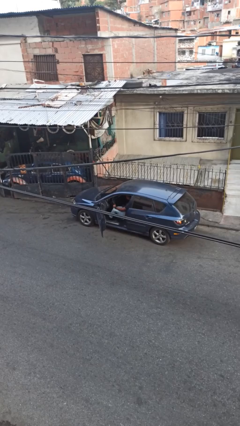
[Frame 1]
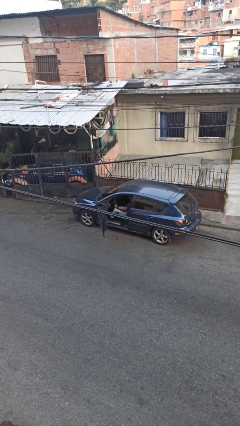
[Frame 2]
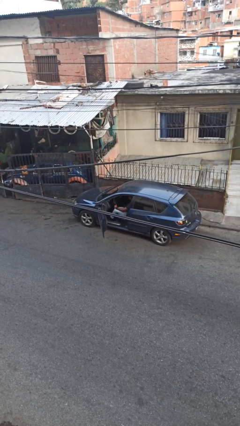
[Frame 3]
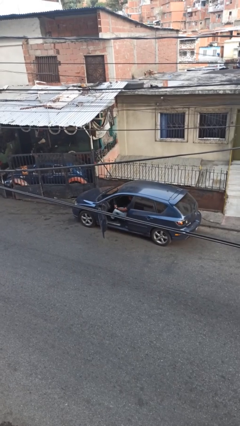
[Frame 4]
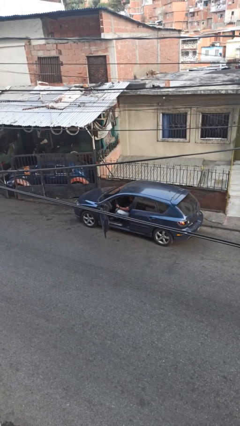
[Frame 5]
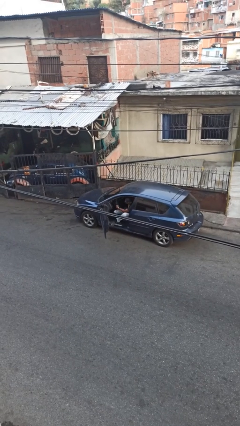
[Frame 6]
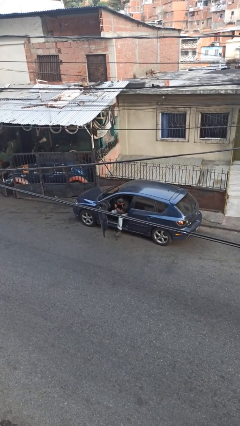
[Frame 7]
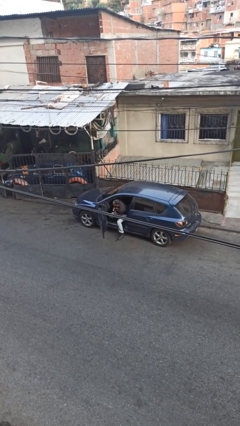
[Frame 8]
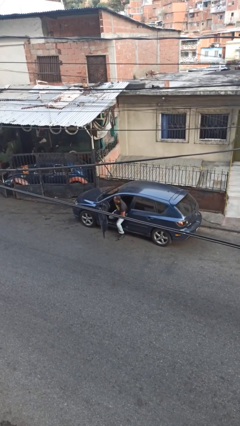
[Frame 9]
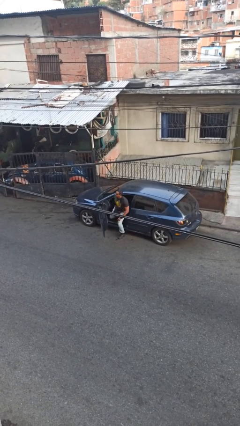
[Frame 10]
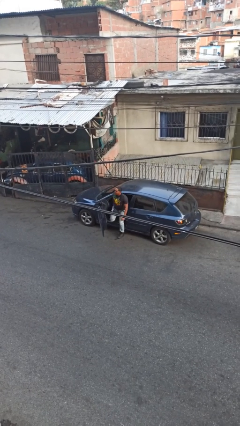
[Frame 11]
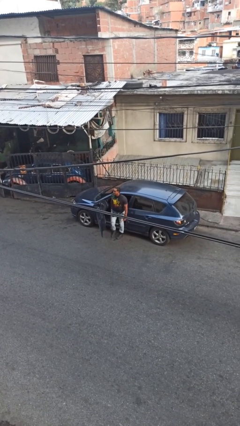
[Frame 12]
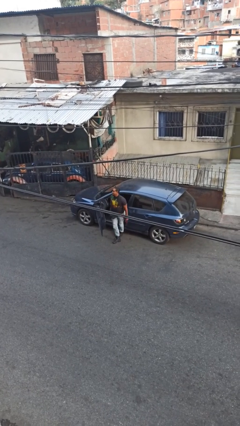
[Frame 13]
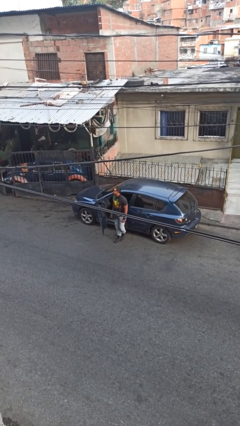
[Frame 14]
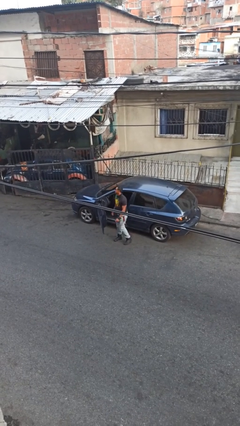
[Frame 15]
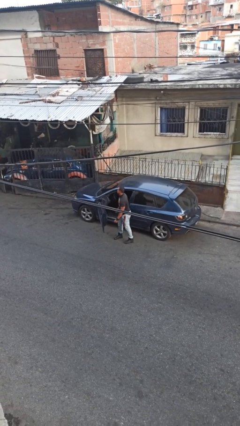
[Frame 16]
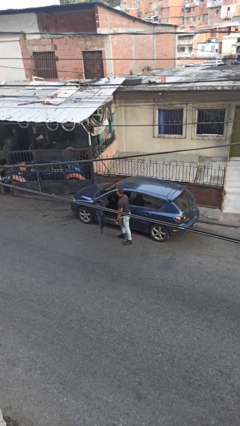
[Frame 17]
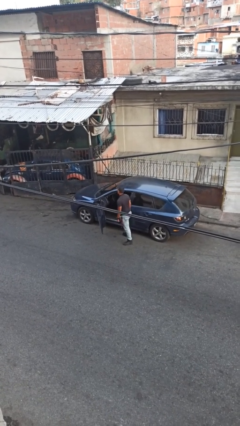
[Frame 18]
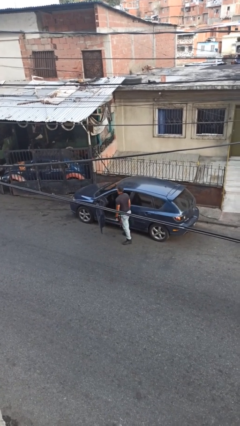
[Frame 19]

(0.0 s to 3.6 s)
person exits car

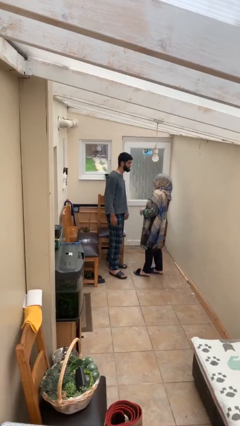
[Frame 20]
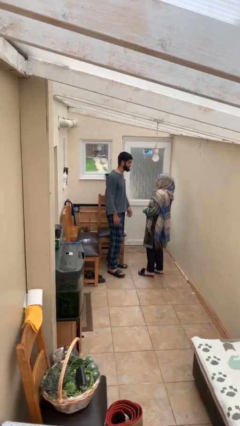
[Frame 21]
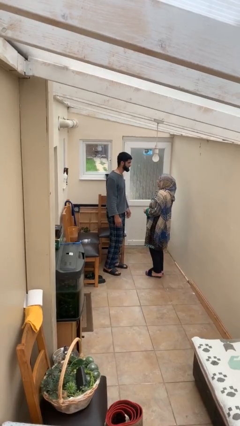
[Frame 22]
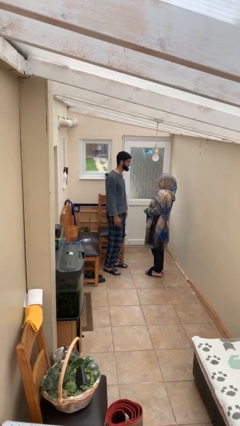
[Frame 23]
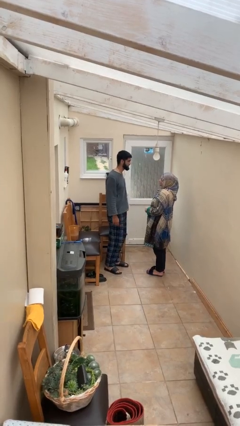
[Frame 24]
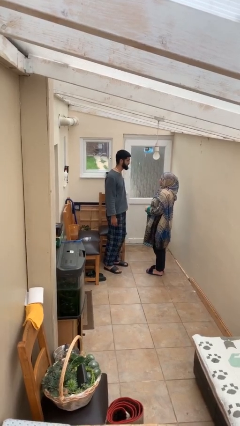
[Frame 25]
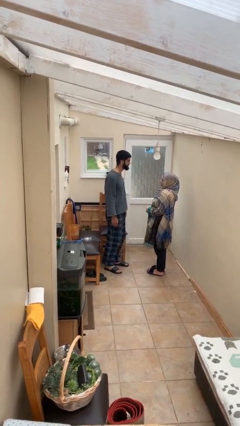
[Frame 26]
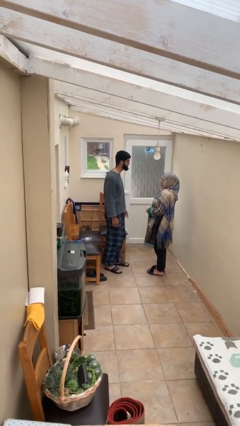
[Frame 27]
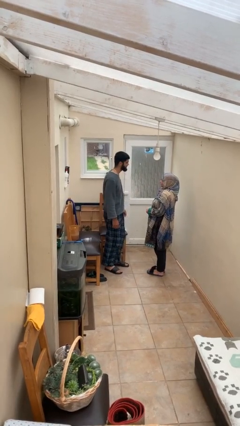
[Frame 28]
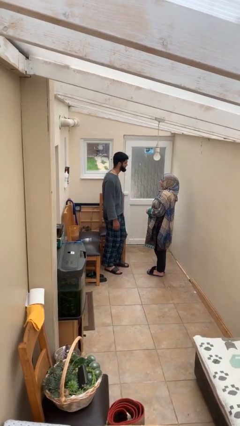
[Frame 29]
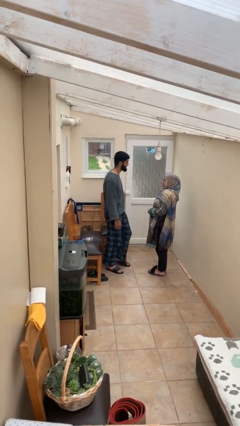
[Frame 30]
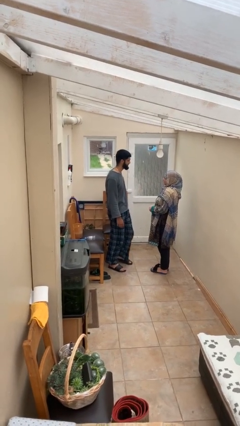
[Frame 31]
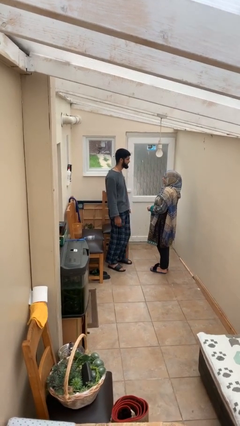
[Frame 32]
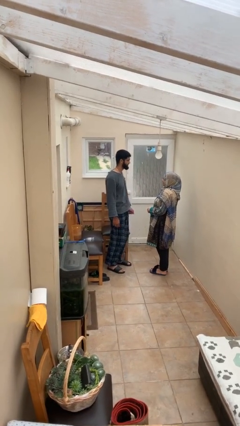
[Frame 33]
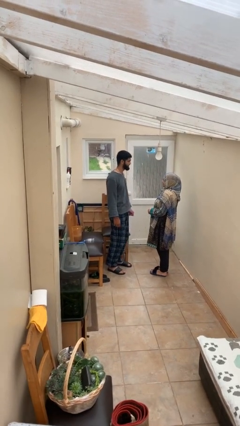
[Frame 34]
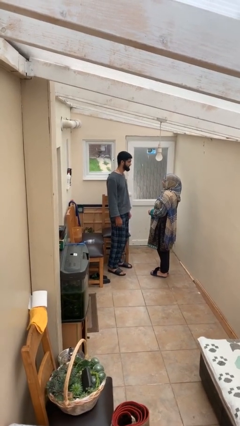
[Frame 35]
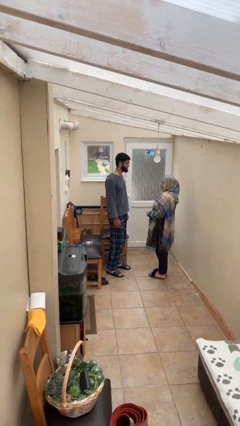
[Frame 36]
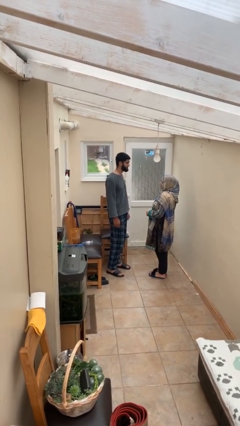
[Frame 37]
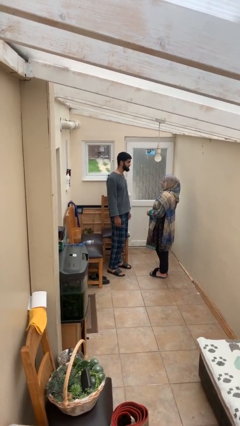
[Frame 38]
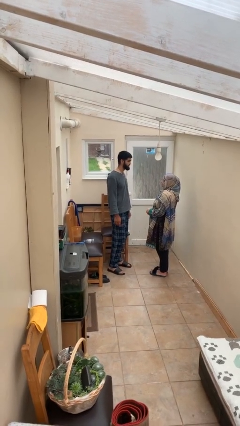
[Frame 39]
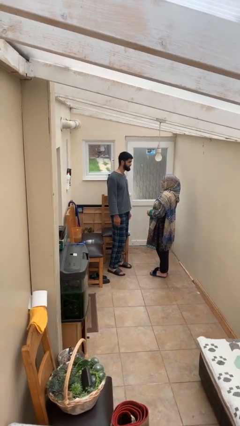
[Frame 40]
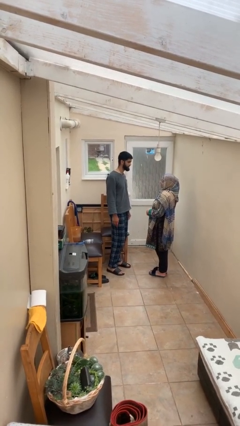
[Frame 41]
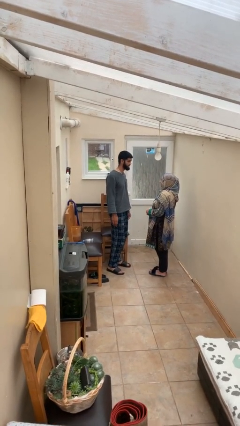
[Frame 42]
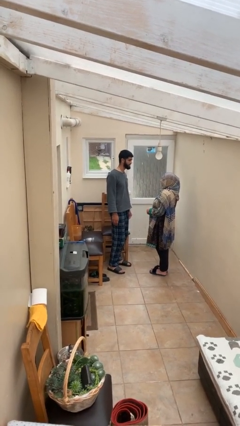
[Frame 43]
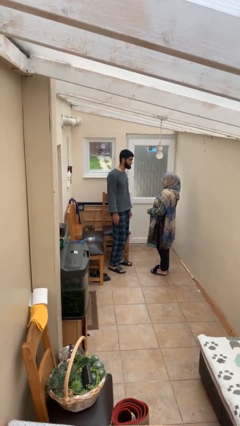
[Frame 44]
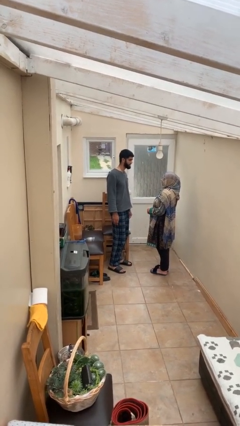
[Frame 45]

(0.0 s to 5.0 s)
person talks to person

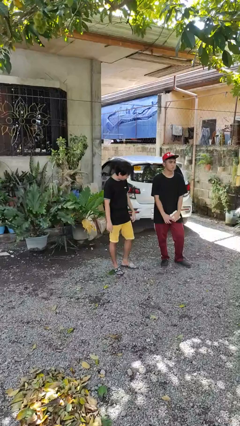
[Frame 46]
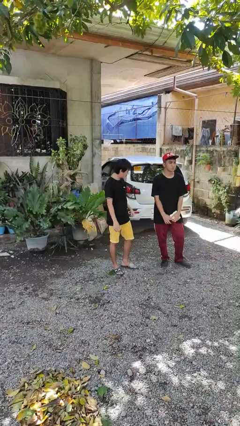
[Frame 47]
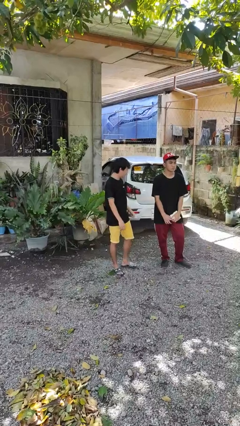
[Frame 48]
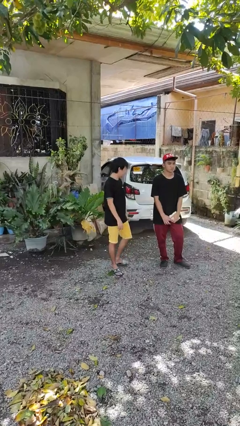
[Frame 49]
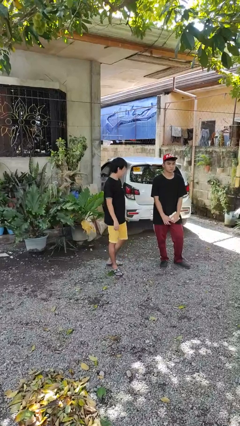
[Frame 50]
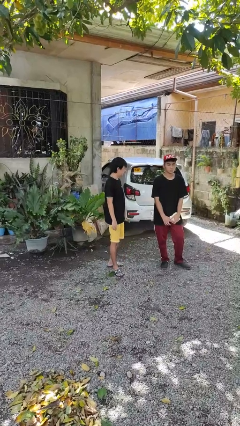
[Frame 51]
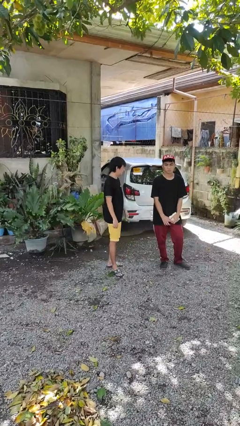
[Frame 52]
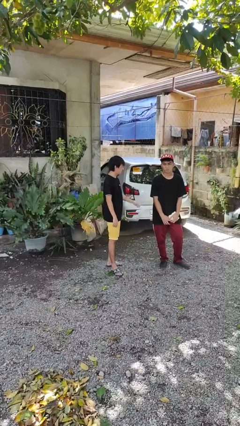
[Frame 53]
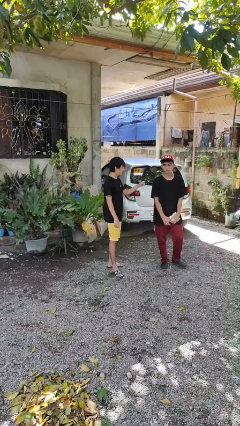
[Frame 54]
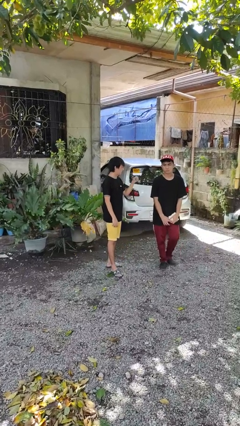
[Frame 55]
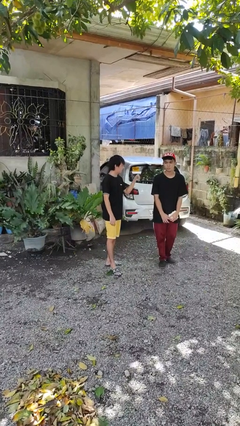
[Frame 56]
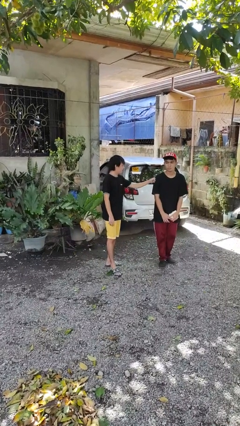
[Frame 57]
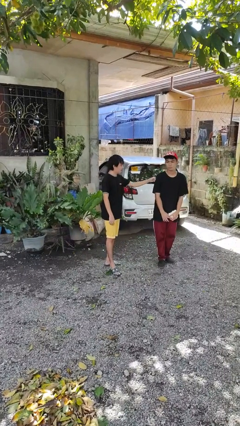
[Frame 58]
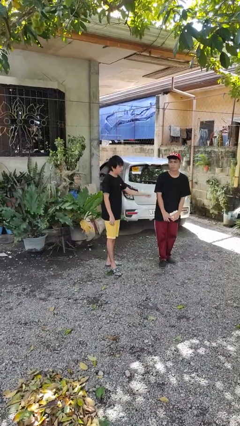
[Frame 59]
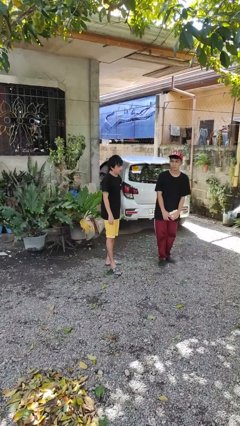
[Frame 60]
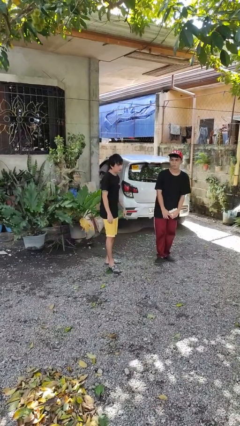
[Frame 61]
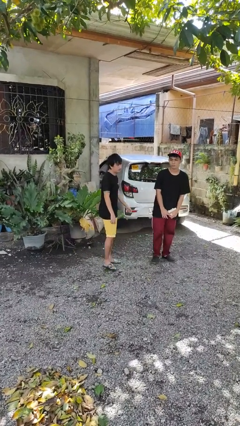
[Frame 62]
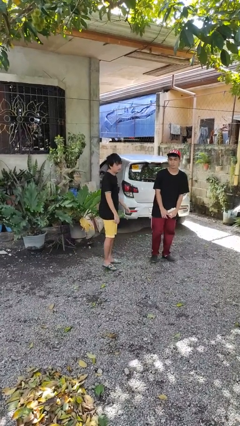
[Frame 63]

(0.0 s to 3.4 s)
person pounds shoulders of person

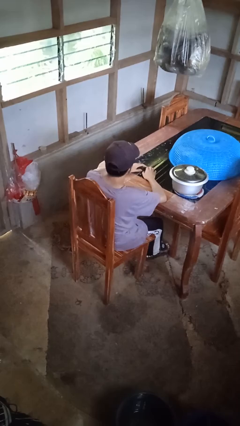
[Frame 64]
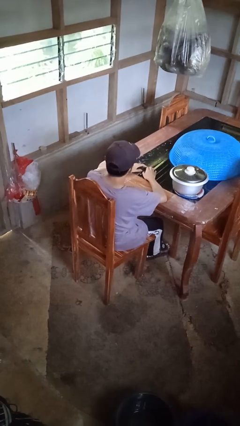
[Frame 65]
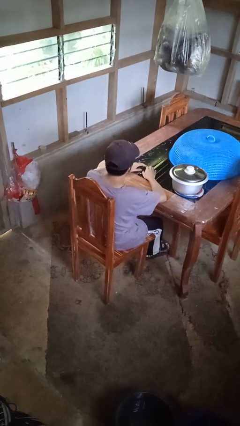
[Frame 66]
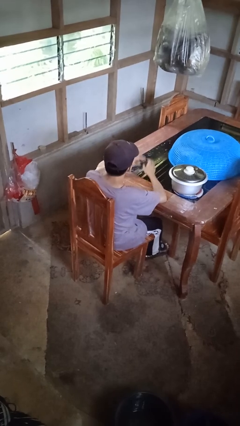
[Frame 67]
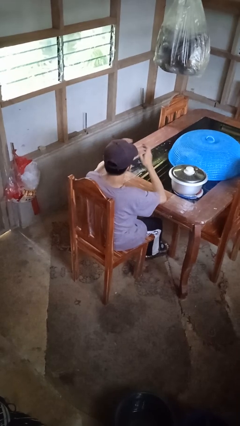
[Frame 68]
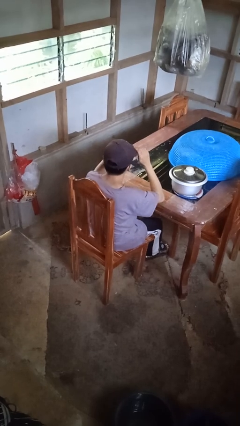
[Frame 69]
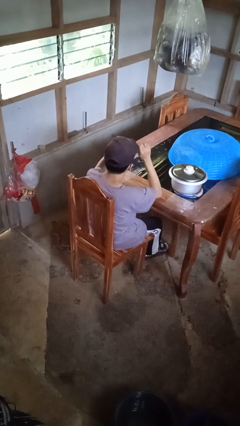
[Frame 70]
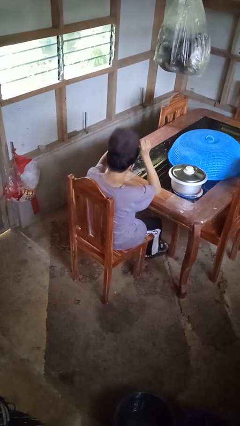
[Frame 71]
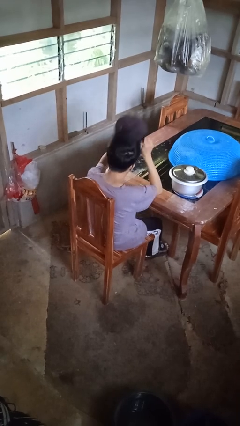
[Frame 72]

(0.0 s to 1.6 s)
person takes off hat

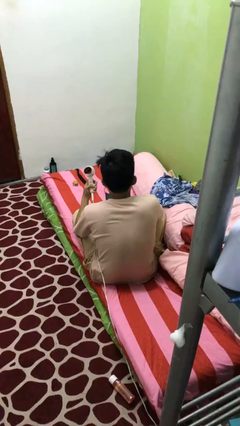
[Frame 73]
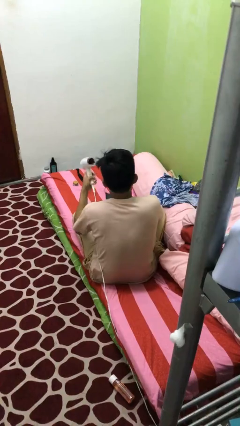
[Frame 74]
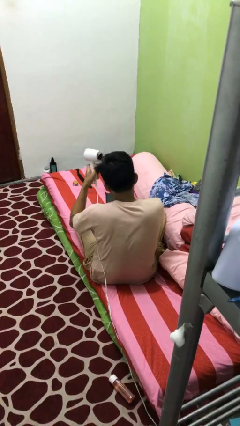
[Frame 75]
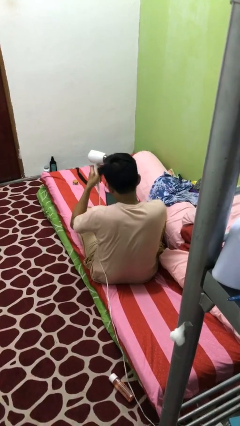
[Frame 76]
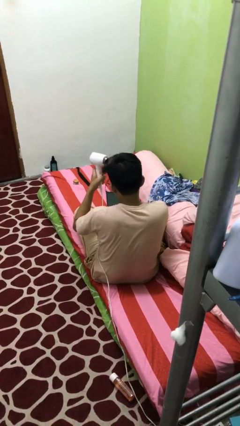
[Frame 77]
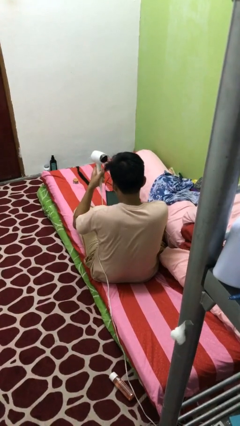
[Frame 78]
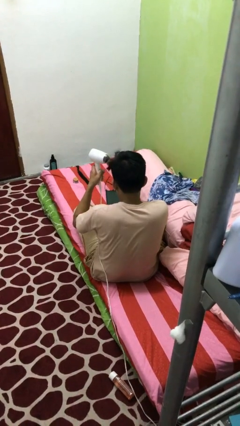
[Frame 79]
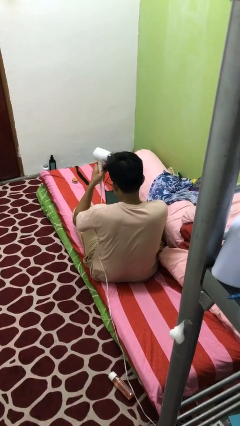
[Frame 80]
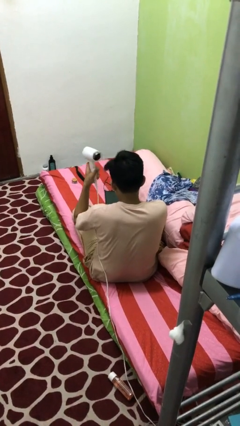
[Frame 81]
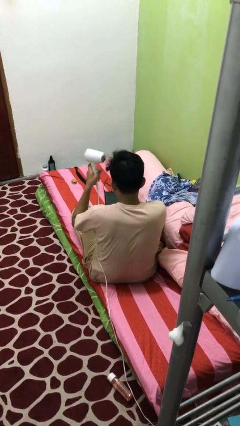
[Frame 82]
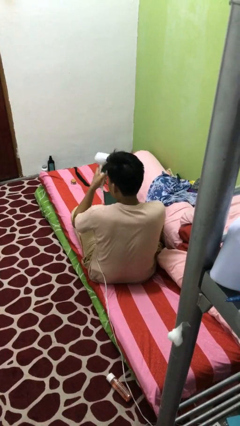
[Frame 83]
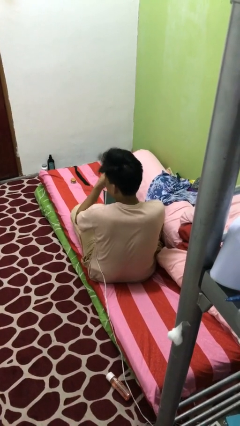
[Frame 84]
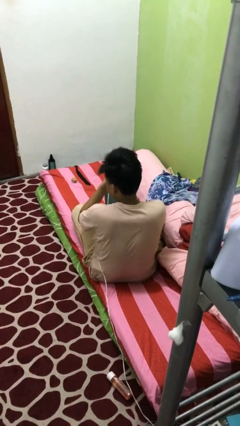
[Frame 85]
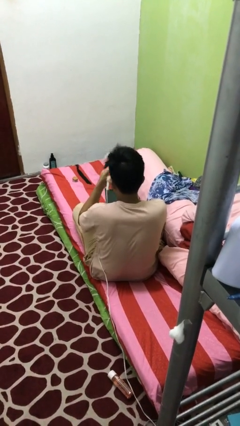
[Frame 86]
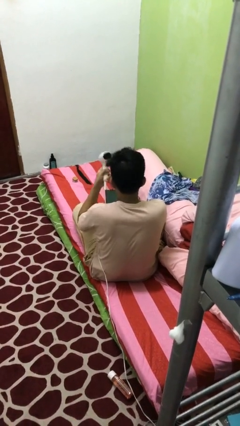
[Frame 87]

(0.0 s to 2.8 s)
person dries hair with hairdryer

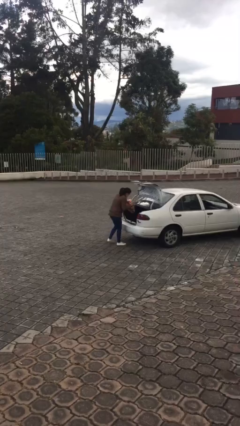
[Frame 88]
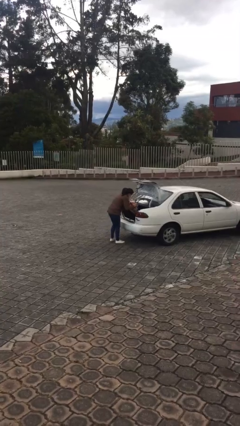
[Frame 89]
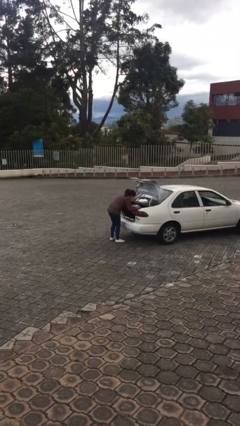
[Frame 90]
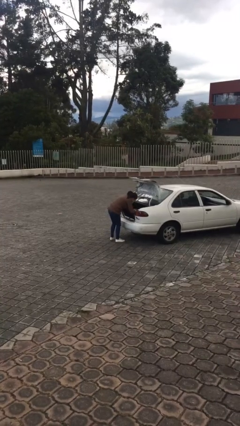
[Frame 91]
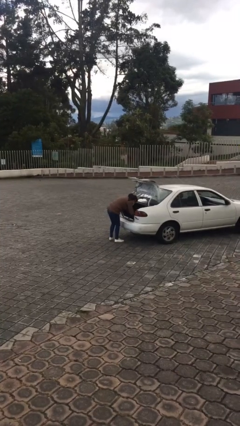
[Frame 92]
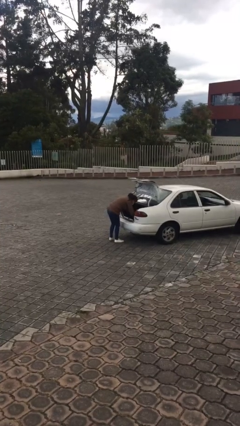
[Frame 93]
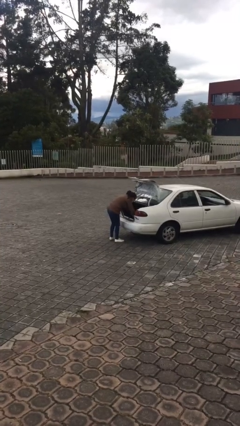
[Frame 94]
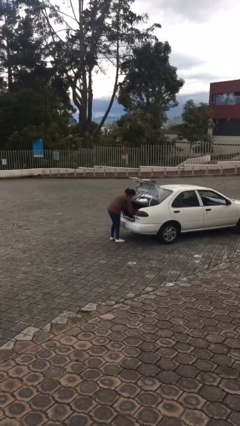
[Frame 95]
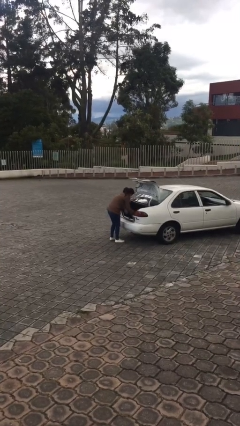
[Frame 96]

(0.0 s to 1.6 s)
person loads car
